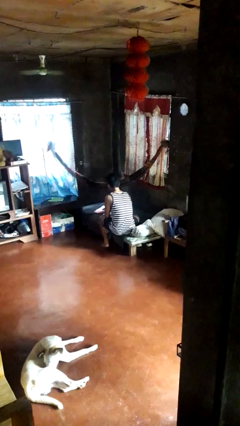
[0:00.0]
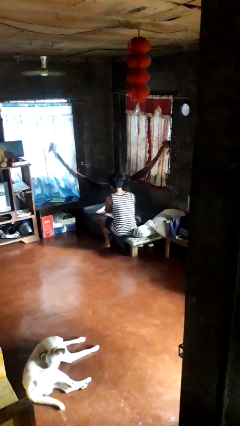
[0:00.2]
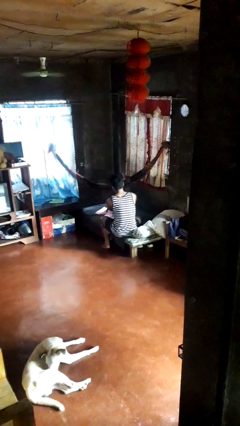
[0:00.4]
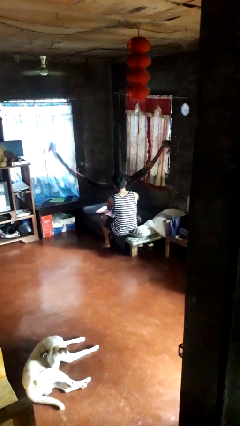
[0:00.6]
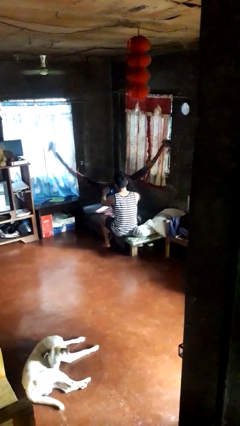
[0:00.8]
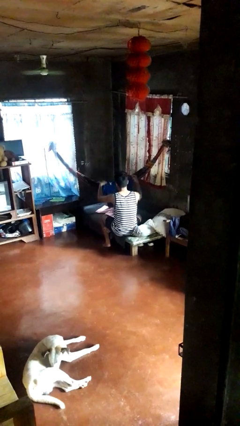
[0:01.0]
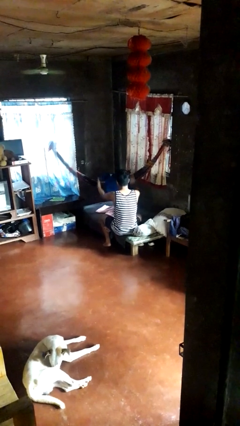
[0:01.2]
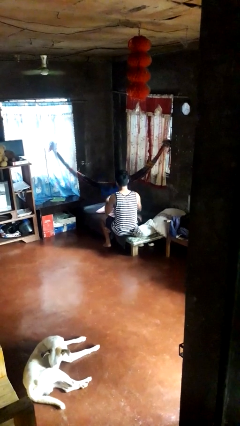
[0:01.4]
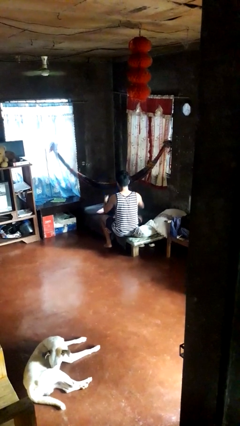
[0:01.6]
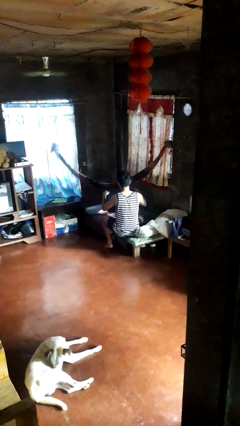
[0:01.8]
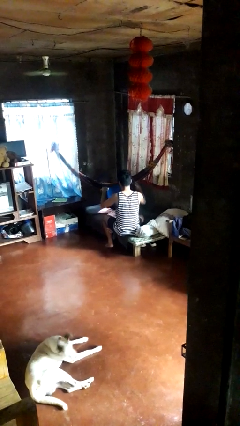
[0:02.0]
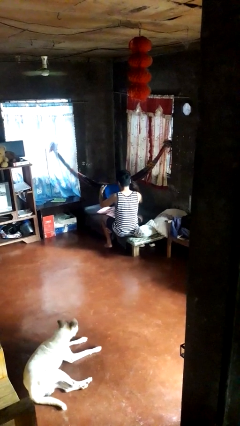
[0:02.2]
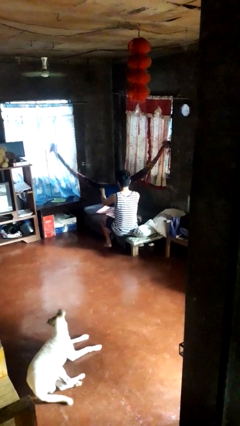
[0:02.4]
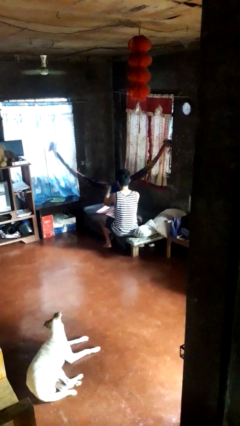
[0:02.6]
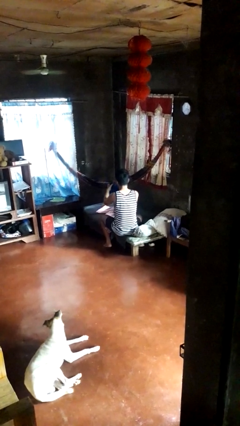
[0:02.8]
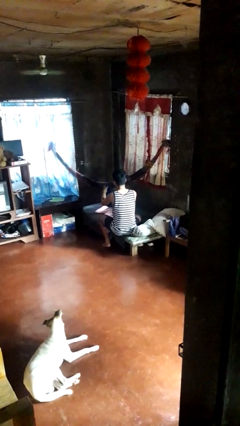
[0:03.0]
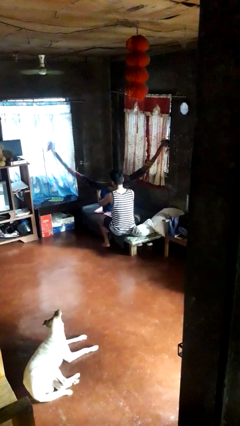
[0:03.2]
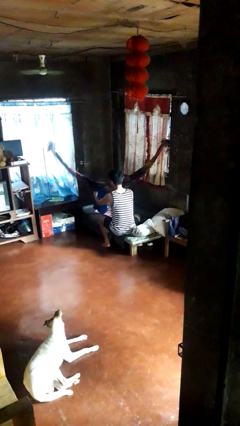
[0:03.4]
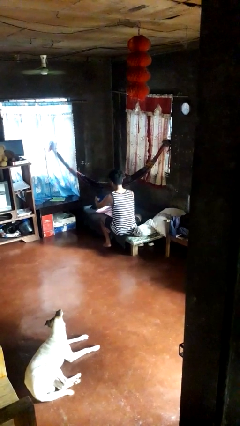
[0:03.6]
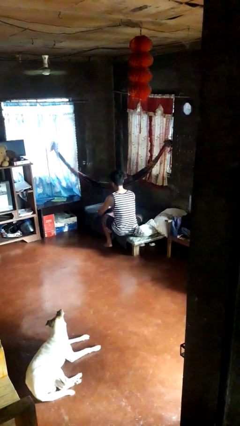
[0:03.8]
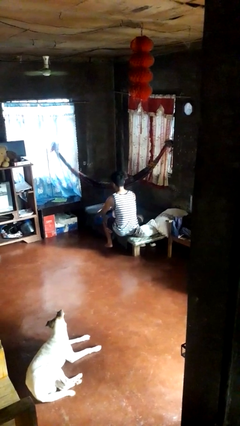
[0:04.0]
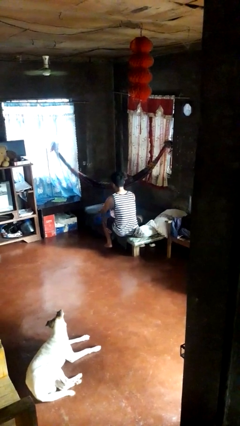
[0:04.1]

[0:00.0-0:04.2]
person folds shirt

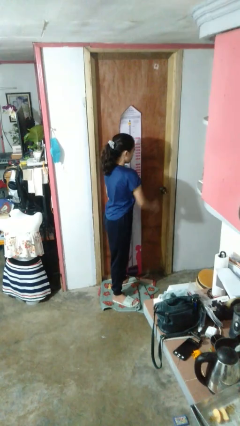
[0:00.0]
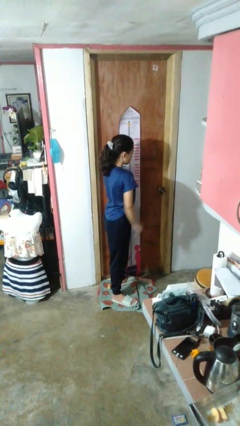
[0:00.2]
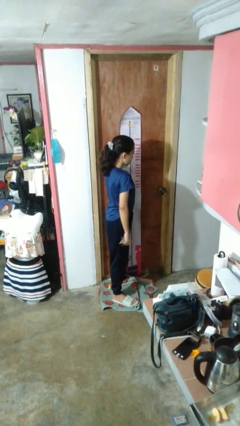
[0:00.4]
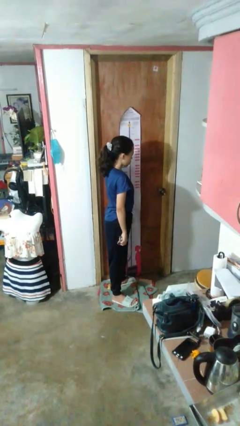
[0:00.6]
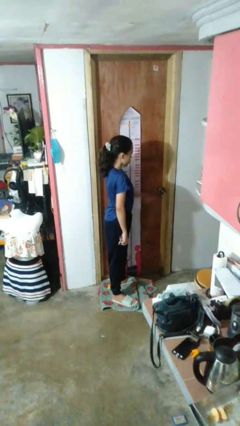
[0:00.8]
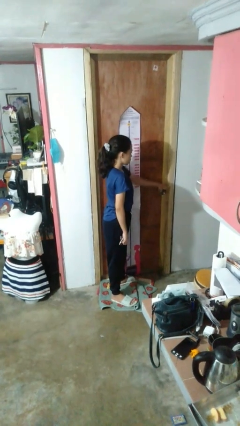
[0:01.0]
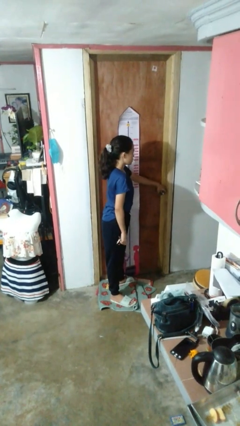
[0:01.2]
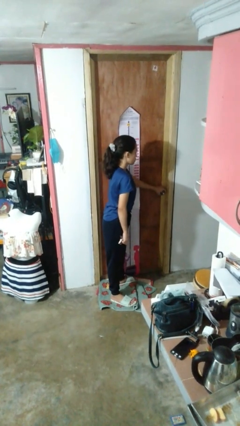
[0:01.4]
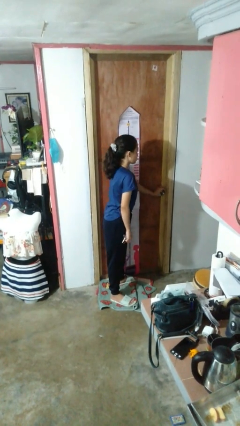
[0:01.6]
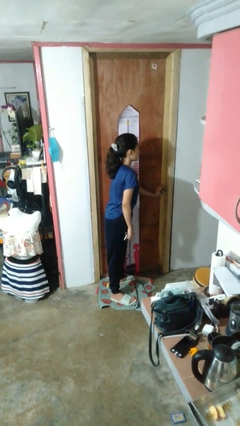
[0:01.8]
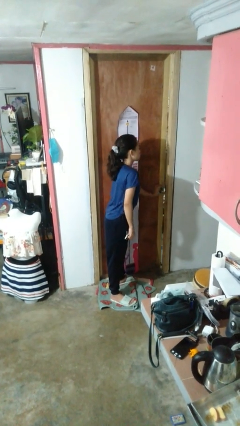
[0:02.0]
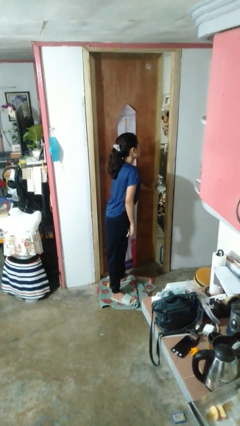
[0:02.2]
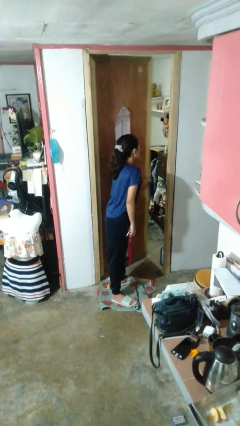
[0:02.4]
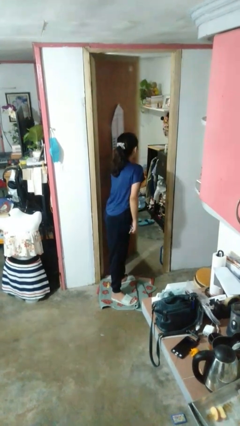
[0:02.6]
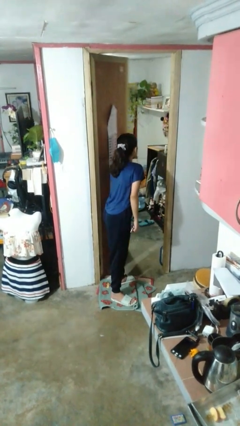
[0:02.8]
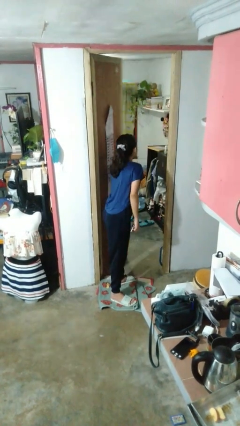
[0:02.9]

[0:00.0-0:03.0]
person opens facility door

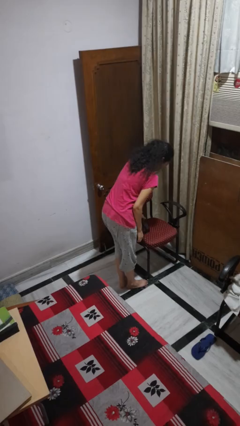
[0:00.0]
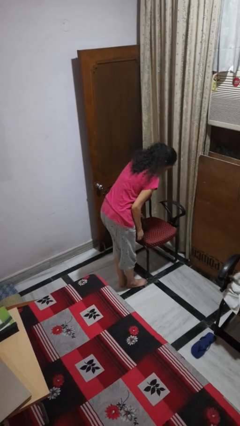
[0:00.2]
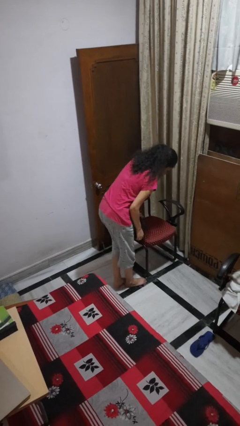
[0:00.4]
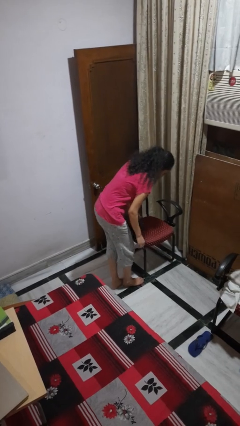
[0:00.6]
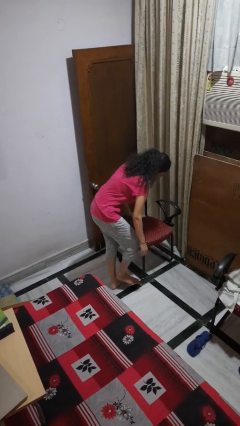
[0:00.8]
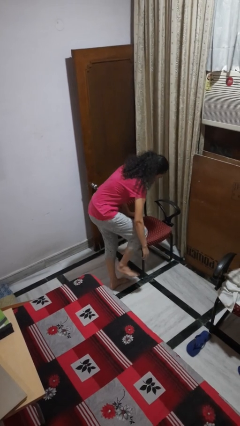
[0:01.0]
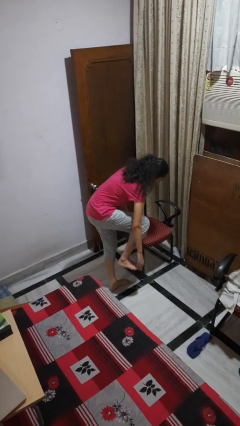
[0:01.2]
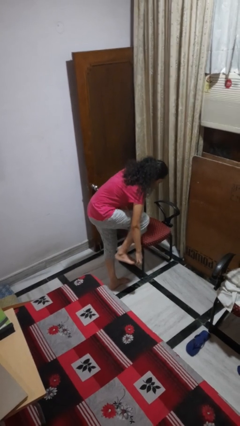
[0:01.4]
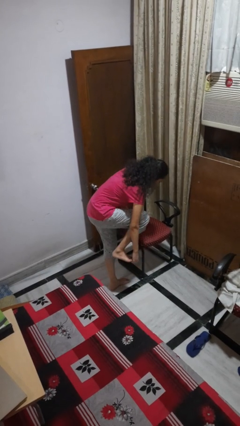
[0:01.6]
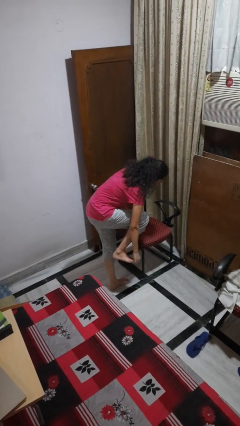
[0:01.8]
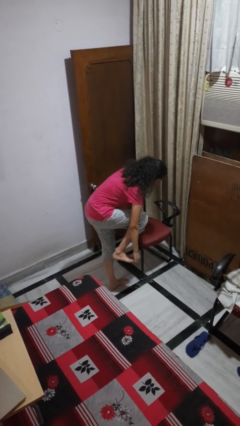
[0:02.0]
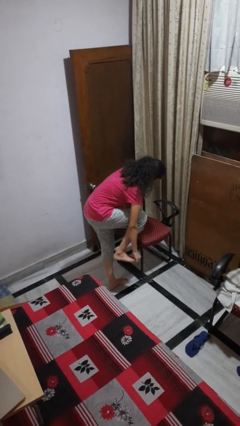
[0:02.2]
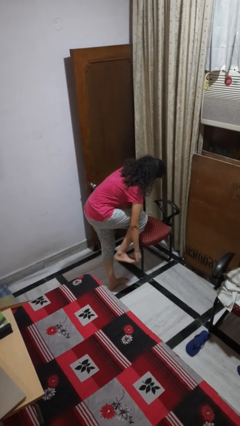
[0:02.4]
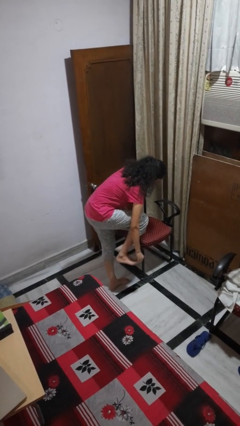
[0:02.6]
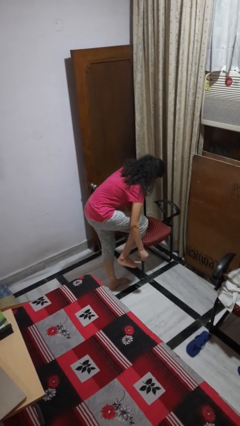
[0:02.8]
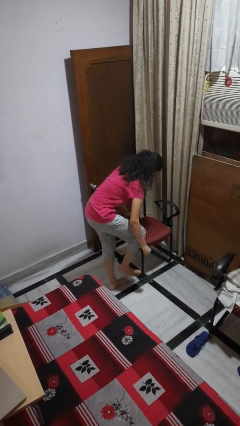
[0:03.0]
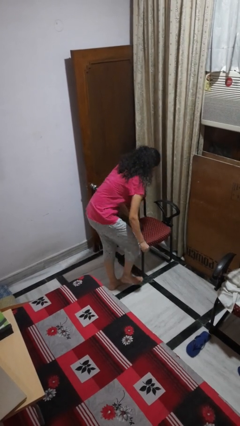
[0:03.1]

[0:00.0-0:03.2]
person stubs toe

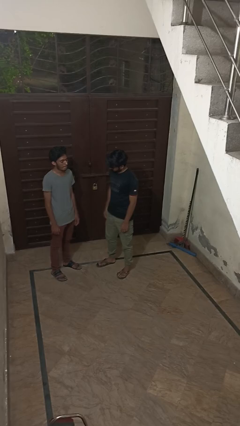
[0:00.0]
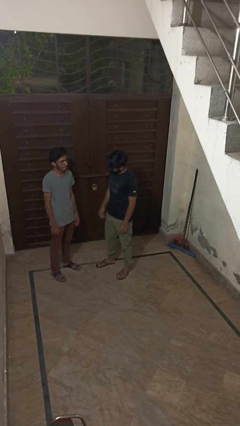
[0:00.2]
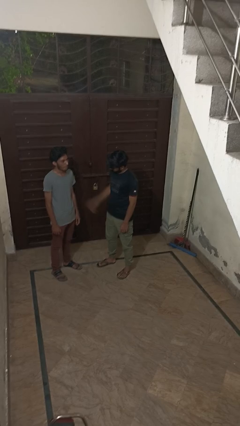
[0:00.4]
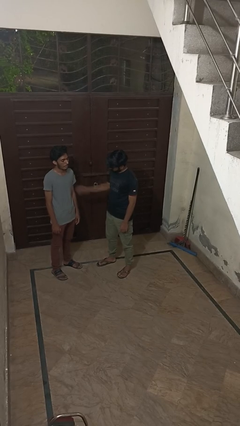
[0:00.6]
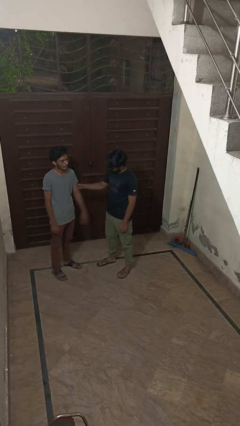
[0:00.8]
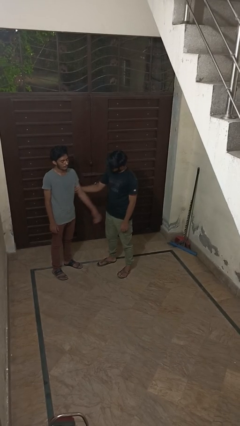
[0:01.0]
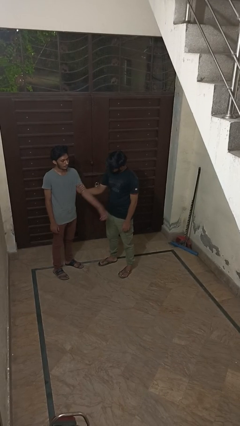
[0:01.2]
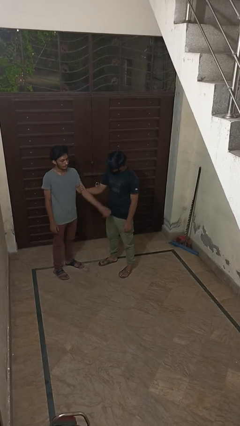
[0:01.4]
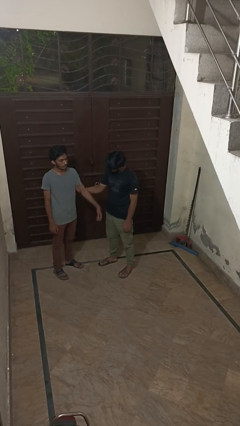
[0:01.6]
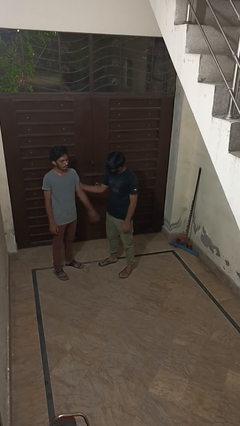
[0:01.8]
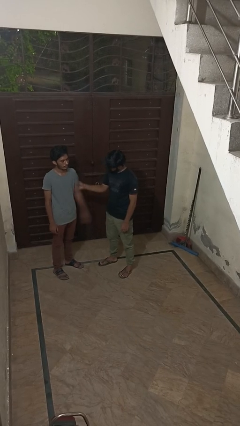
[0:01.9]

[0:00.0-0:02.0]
person grabs person by bicep

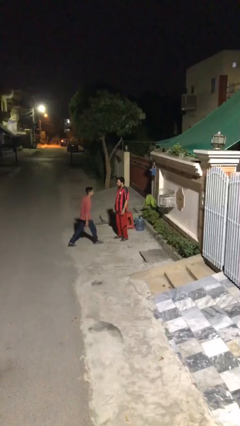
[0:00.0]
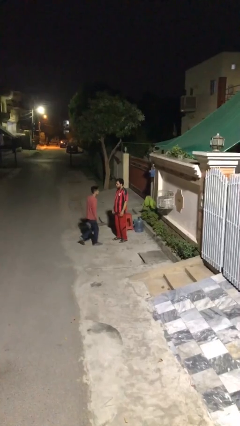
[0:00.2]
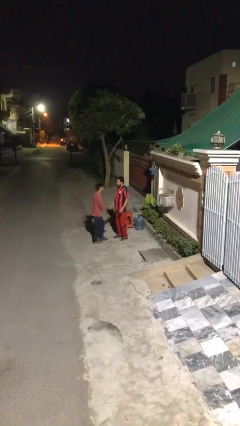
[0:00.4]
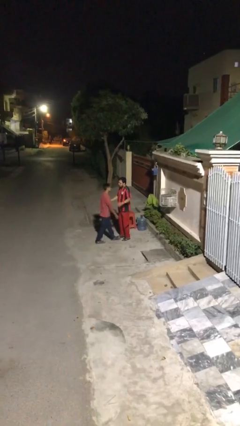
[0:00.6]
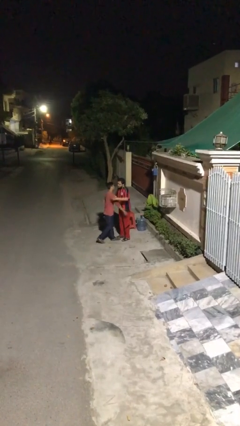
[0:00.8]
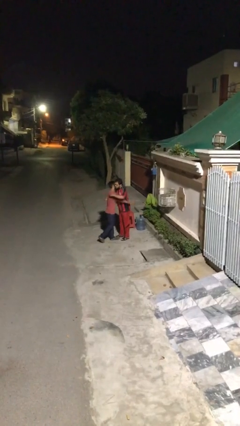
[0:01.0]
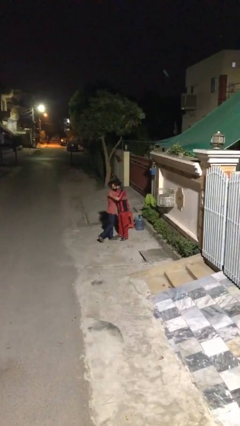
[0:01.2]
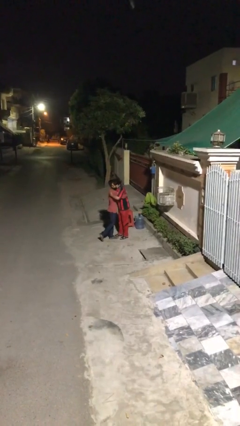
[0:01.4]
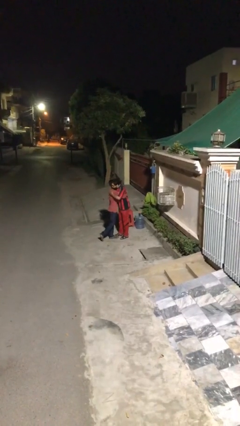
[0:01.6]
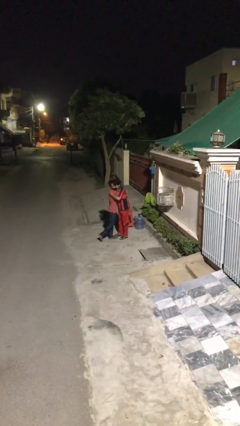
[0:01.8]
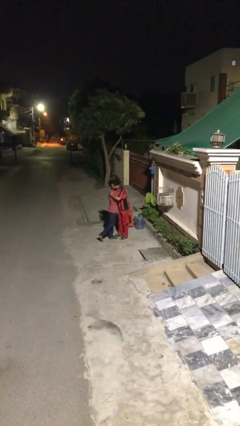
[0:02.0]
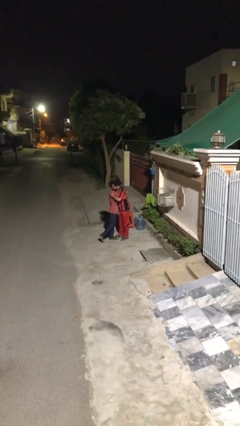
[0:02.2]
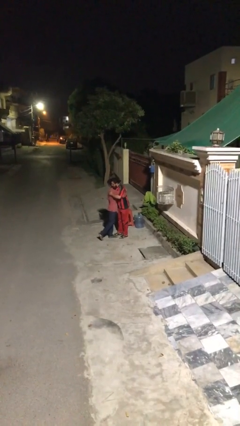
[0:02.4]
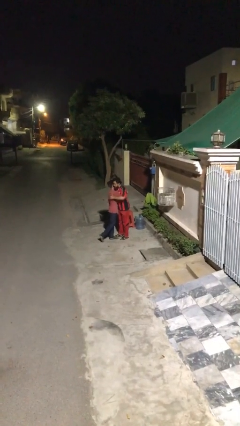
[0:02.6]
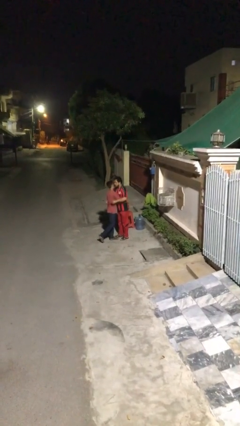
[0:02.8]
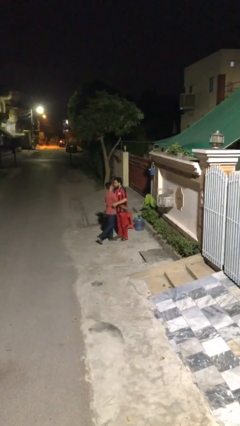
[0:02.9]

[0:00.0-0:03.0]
person embraces person

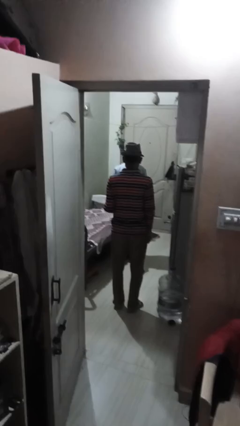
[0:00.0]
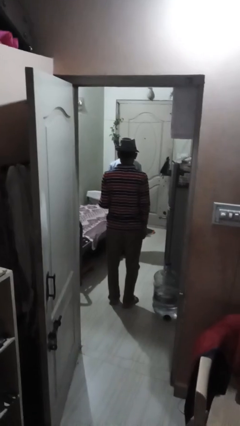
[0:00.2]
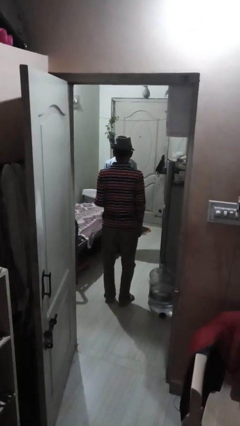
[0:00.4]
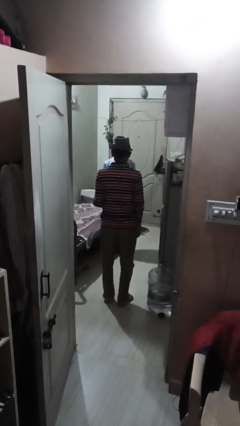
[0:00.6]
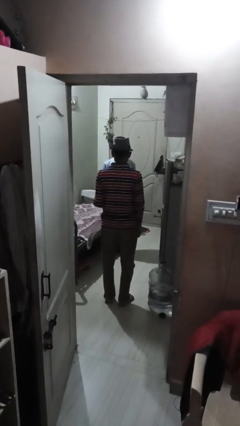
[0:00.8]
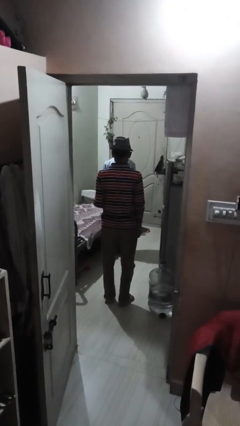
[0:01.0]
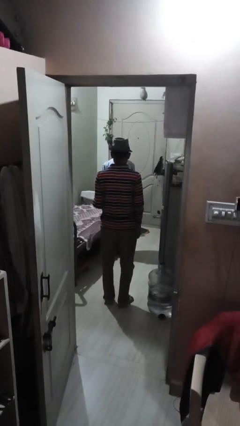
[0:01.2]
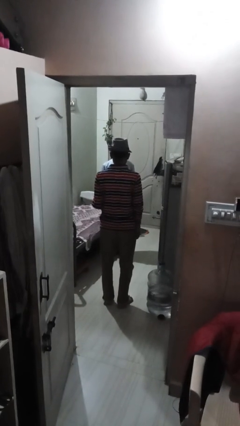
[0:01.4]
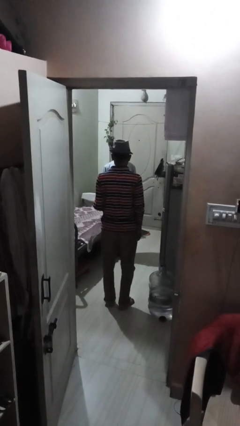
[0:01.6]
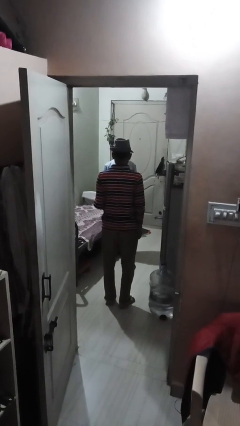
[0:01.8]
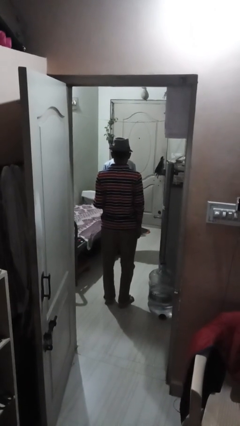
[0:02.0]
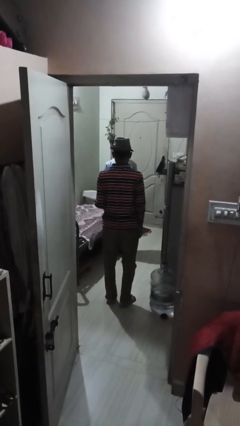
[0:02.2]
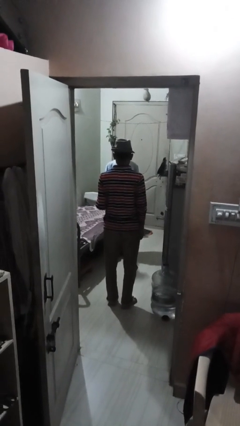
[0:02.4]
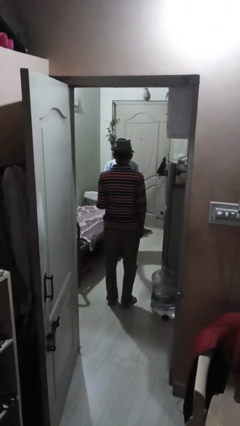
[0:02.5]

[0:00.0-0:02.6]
person throws object to person
